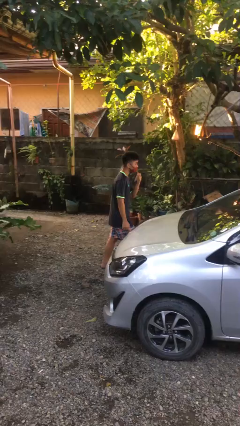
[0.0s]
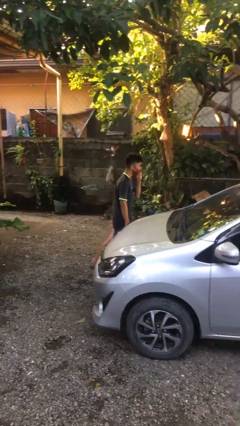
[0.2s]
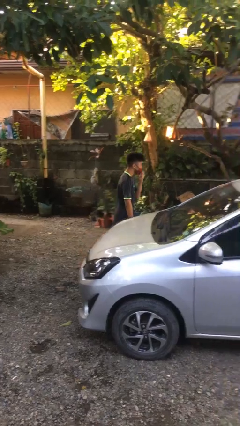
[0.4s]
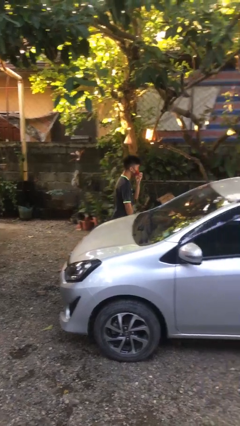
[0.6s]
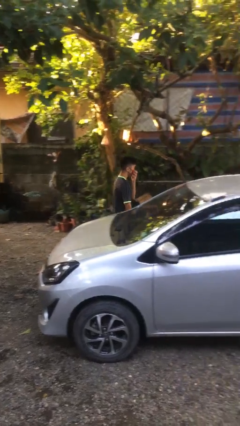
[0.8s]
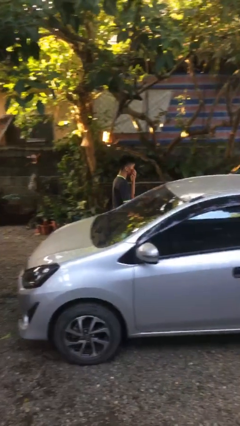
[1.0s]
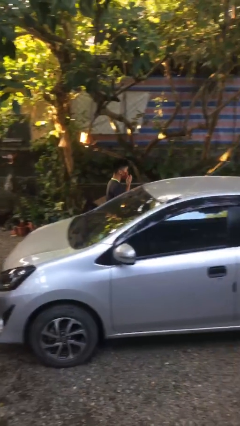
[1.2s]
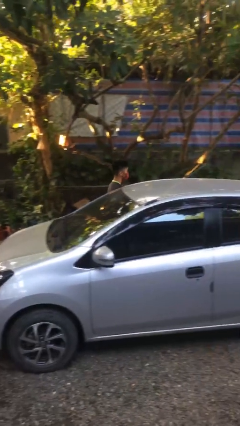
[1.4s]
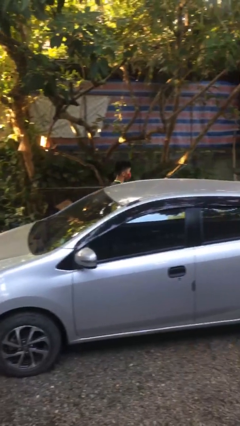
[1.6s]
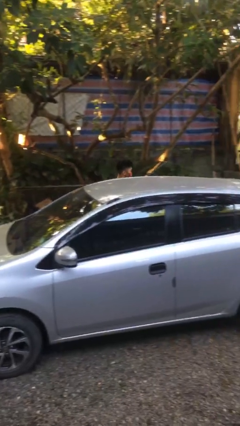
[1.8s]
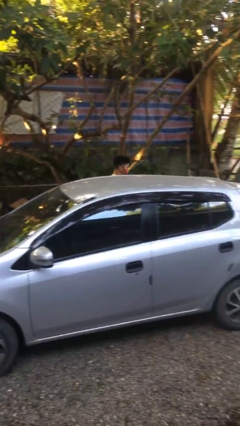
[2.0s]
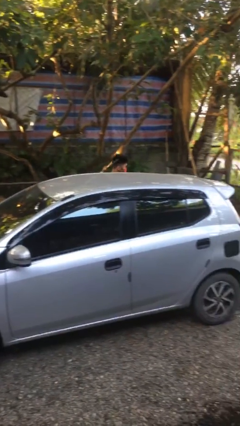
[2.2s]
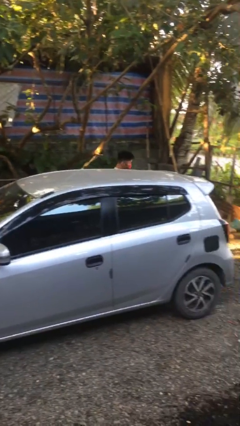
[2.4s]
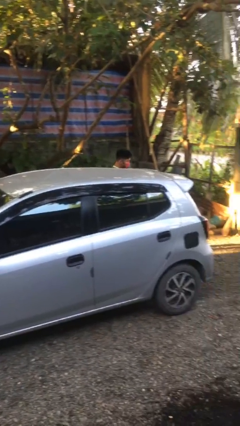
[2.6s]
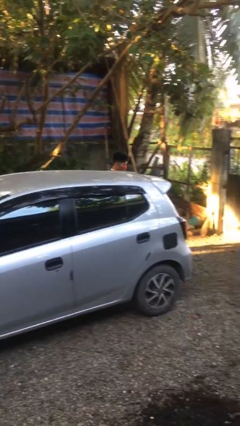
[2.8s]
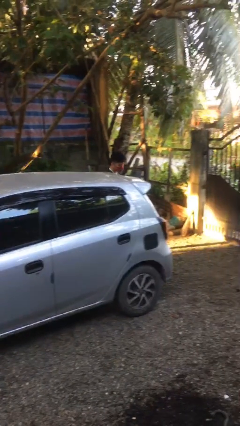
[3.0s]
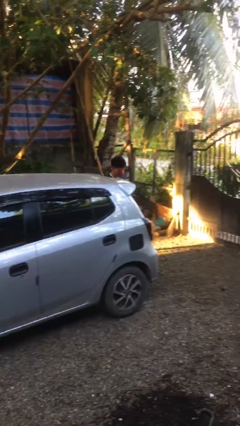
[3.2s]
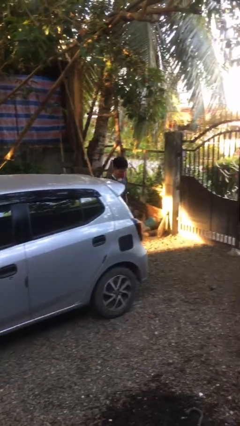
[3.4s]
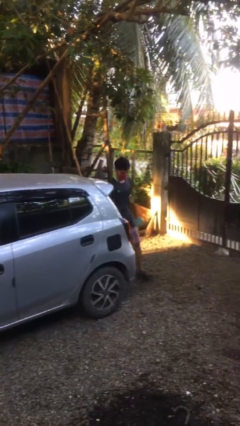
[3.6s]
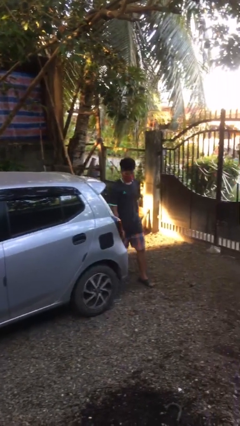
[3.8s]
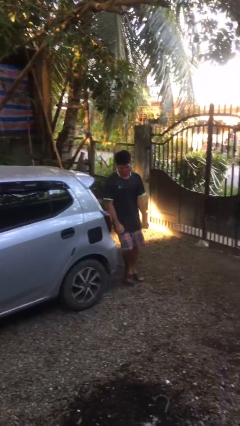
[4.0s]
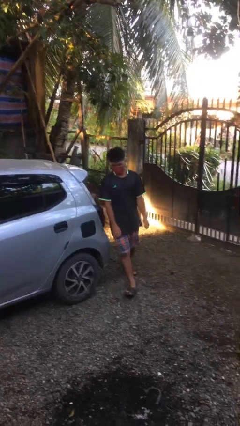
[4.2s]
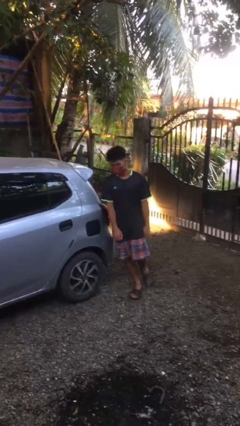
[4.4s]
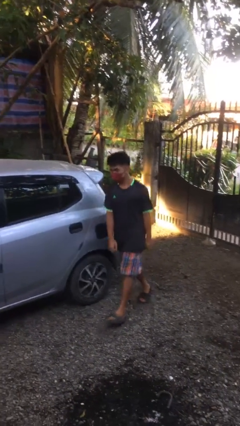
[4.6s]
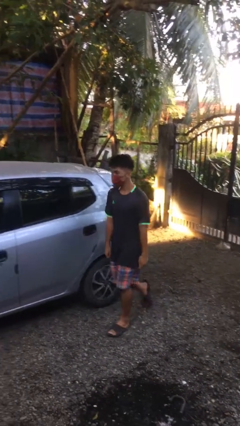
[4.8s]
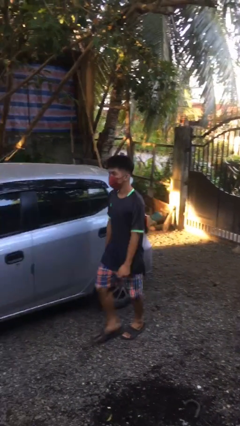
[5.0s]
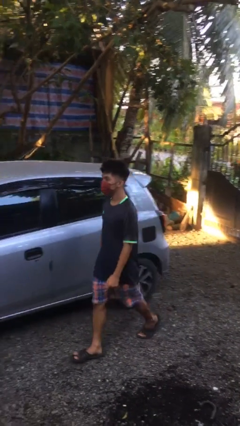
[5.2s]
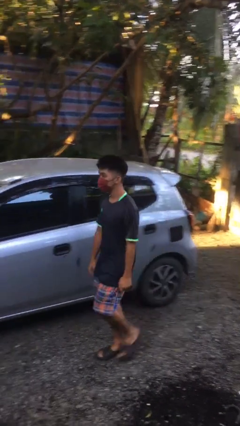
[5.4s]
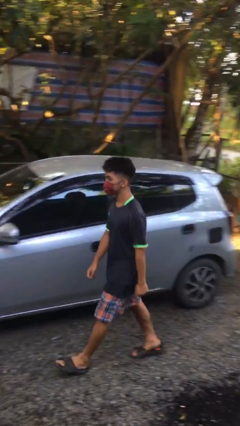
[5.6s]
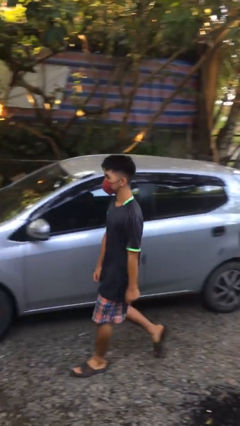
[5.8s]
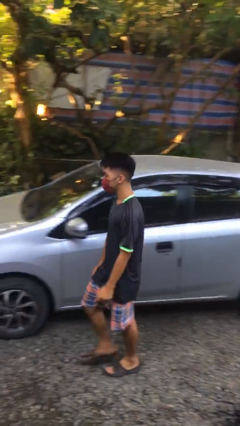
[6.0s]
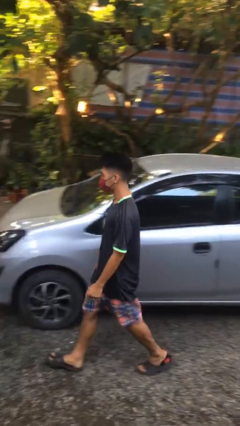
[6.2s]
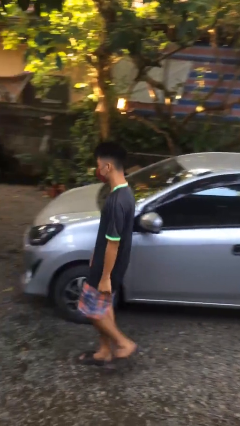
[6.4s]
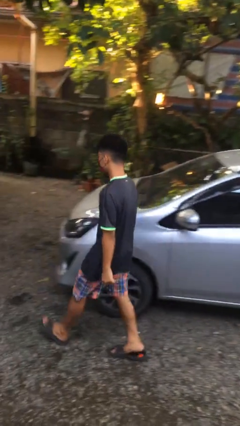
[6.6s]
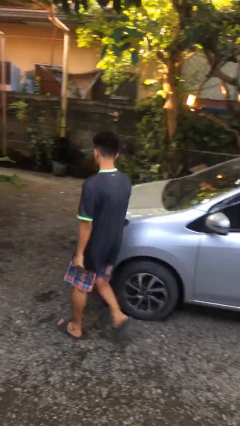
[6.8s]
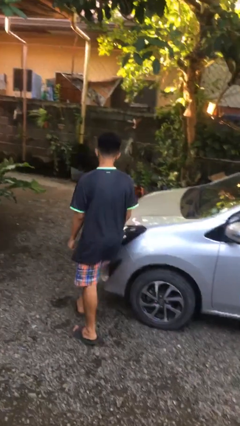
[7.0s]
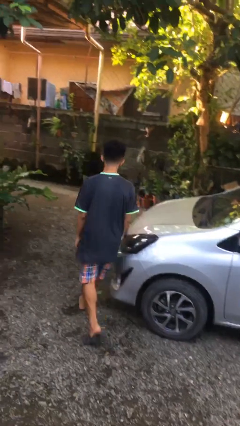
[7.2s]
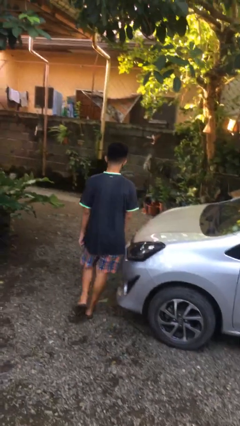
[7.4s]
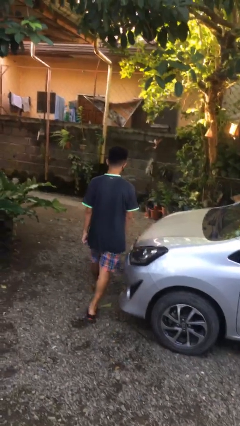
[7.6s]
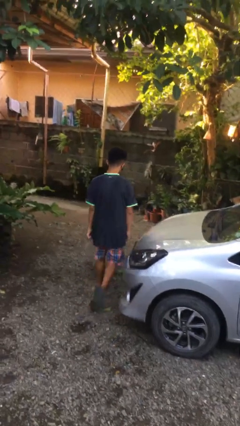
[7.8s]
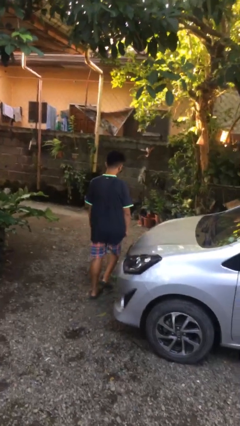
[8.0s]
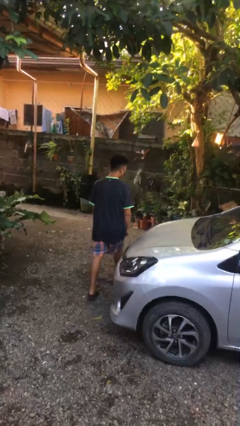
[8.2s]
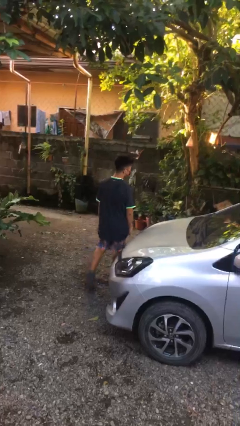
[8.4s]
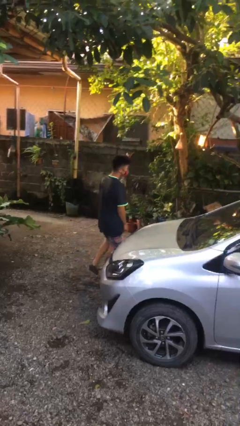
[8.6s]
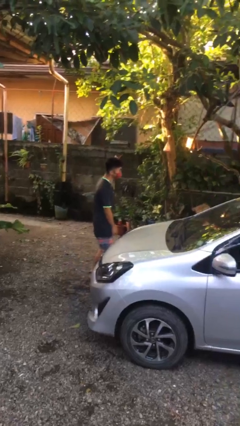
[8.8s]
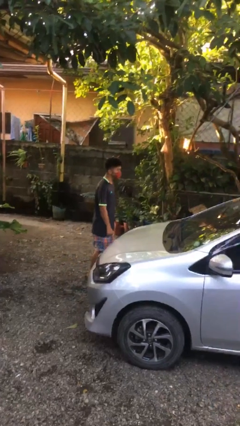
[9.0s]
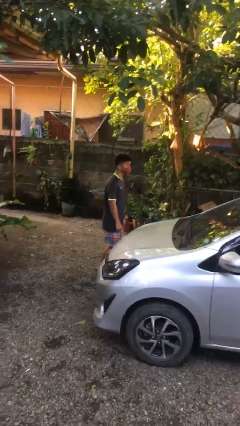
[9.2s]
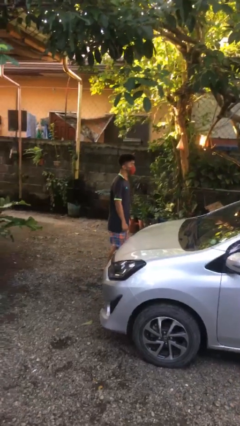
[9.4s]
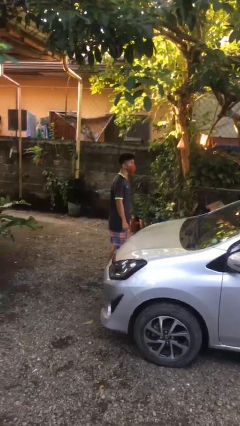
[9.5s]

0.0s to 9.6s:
person walks around car

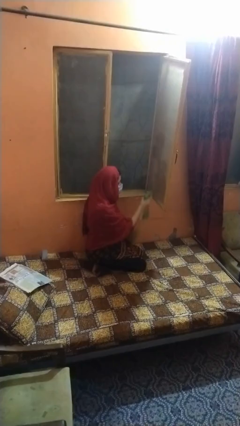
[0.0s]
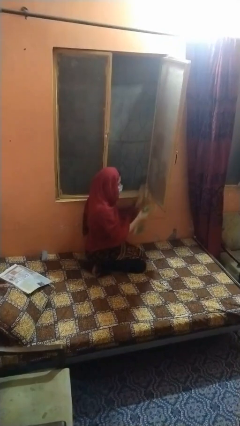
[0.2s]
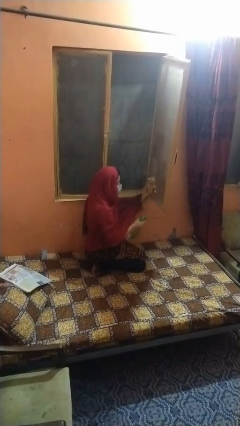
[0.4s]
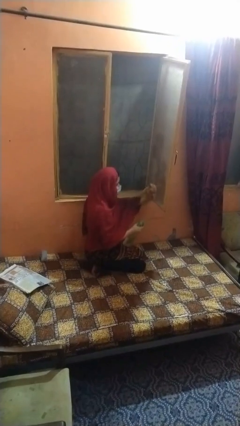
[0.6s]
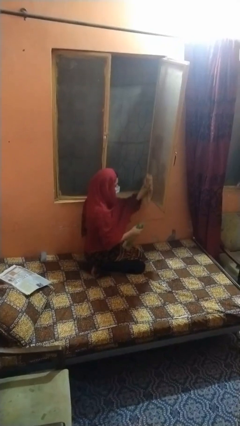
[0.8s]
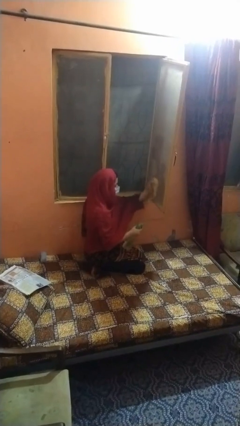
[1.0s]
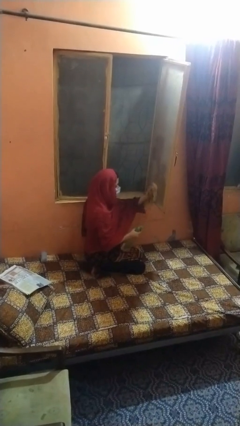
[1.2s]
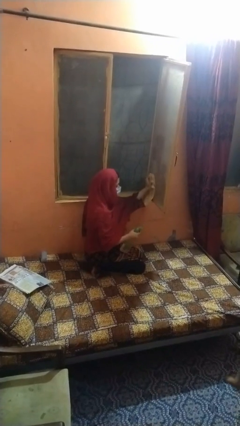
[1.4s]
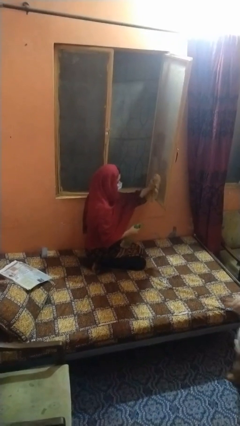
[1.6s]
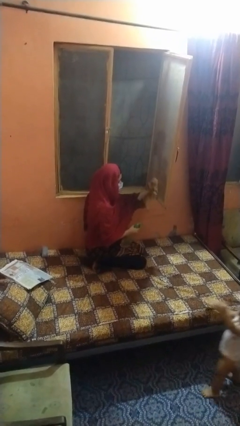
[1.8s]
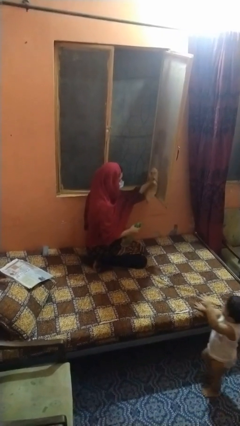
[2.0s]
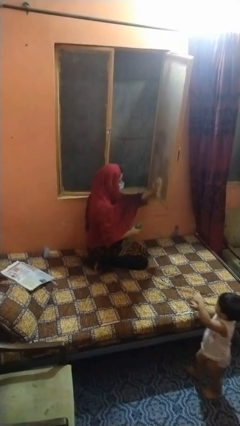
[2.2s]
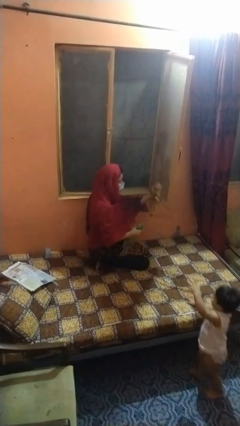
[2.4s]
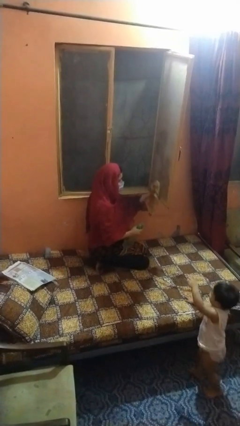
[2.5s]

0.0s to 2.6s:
person washes window

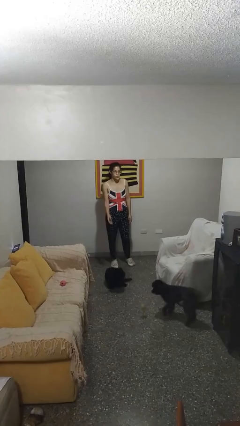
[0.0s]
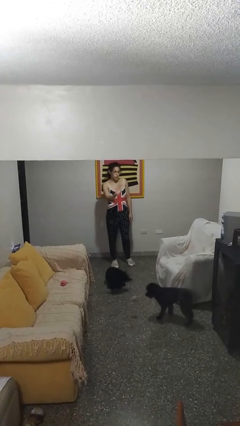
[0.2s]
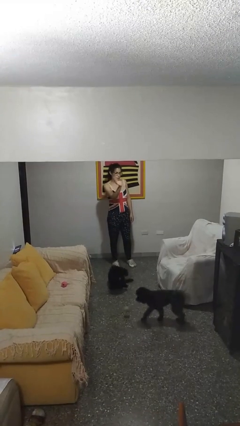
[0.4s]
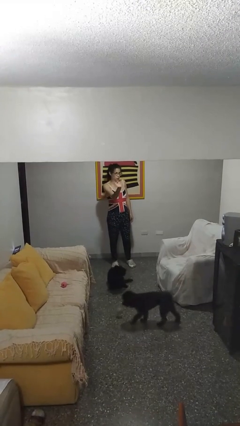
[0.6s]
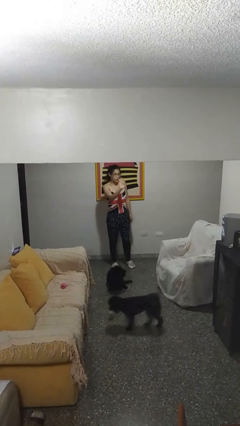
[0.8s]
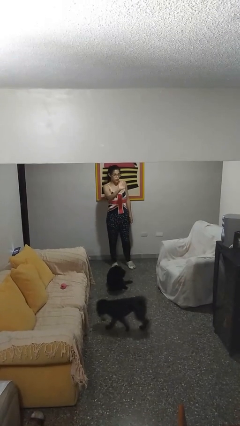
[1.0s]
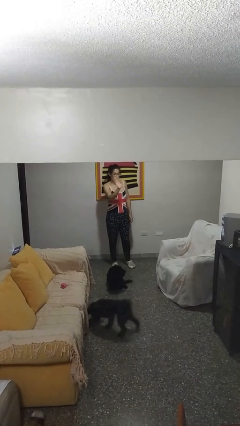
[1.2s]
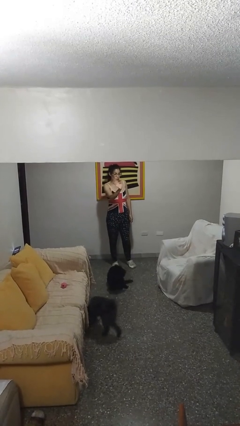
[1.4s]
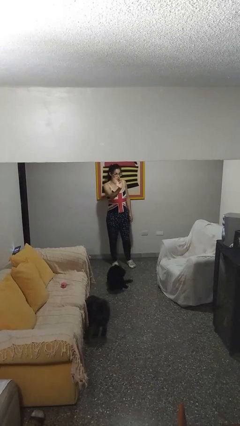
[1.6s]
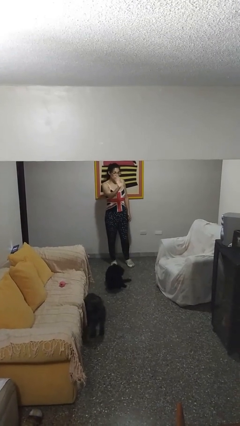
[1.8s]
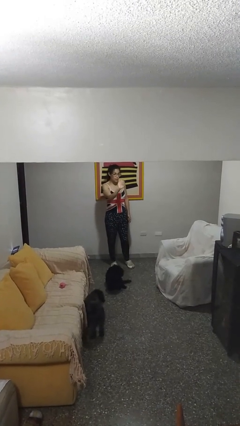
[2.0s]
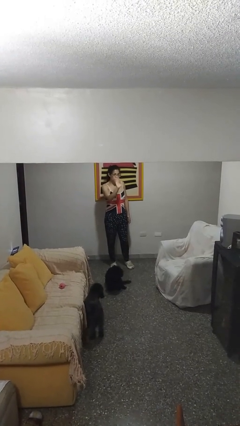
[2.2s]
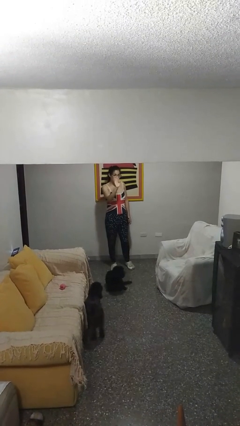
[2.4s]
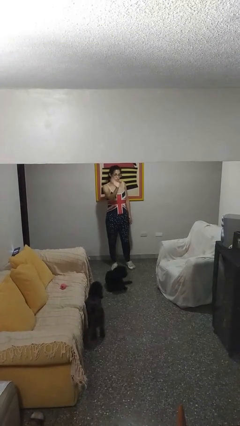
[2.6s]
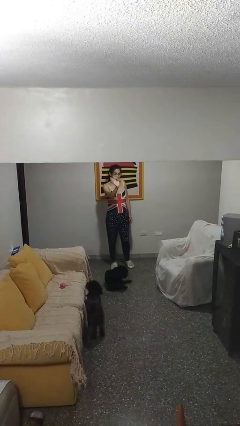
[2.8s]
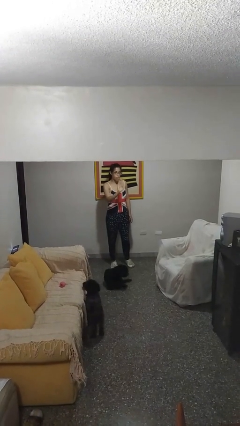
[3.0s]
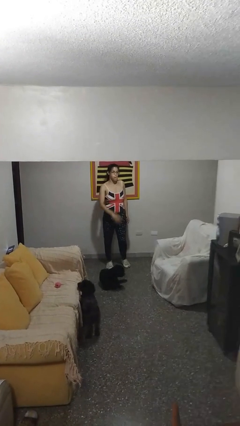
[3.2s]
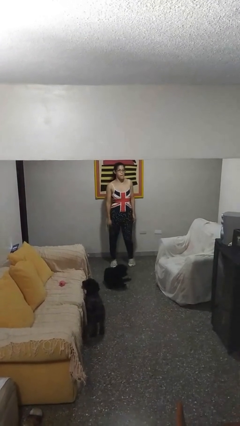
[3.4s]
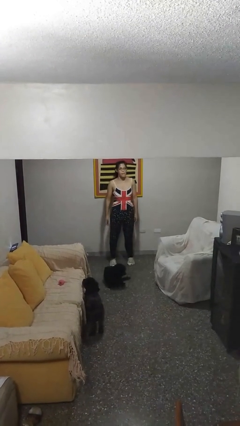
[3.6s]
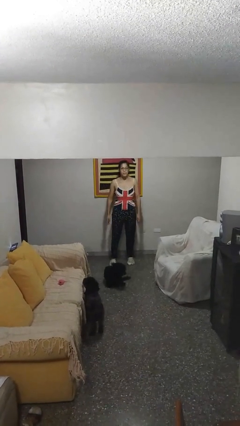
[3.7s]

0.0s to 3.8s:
person waves at person

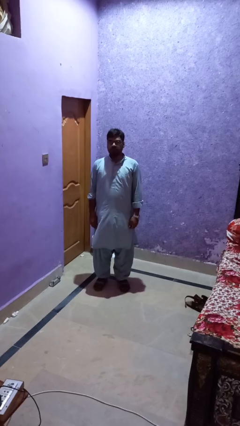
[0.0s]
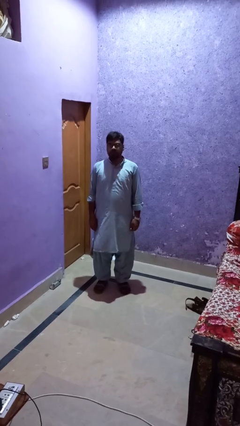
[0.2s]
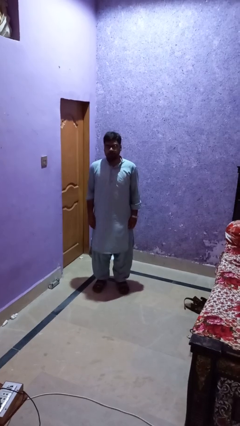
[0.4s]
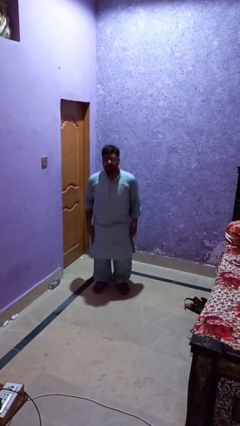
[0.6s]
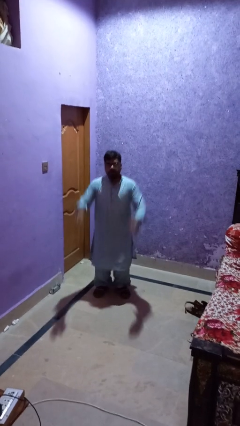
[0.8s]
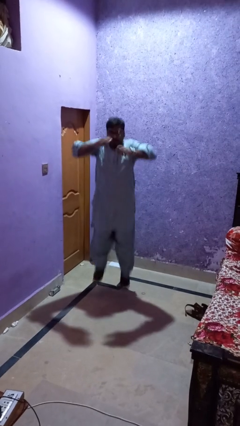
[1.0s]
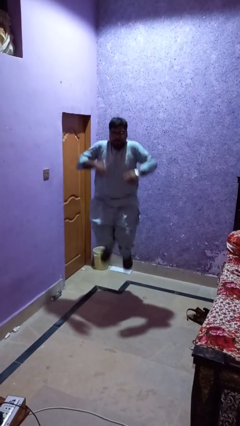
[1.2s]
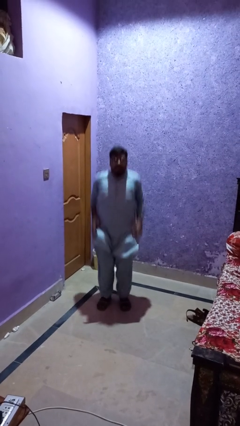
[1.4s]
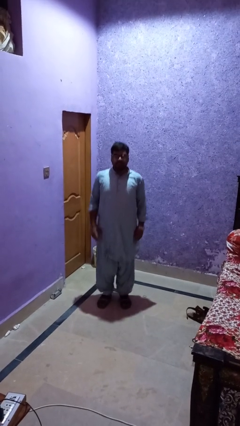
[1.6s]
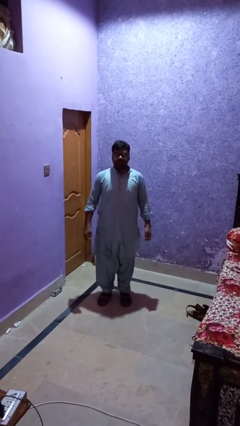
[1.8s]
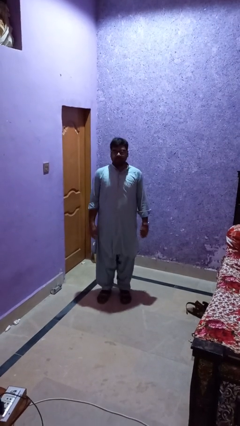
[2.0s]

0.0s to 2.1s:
person jumps

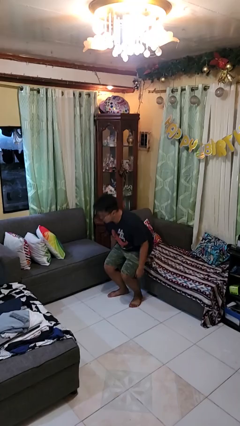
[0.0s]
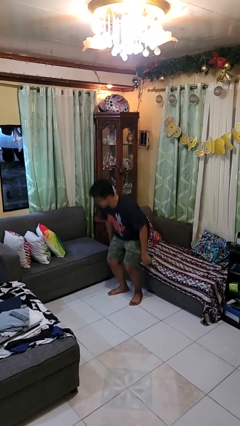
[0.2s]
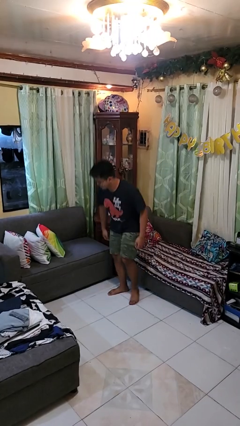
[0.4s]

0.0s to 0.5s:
person jumps on couch
